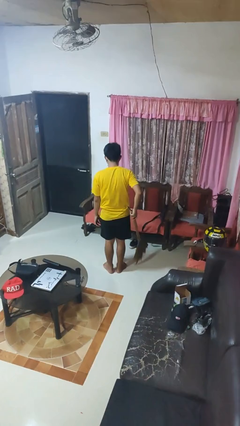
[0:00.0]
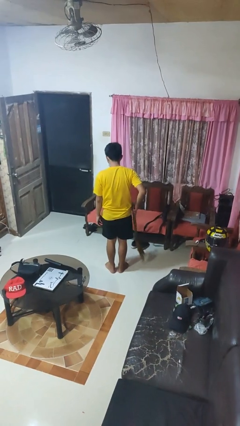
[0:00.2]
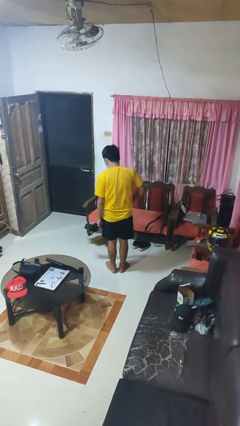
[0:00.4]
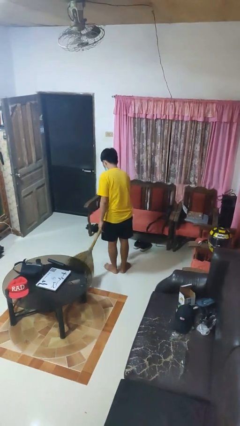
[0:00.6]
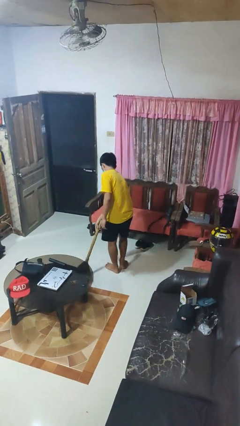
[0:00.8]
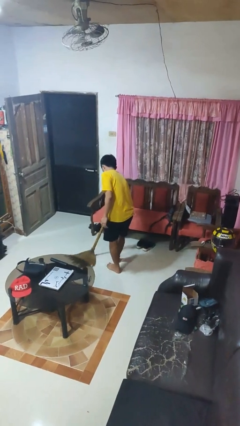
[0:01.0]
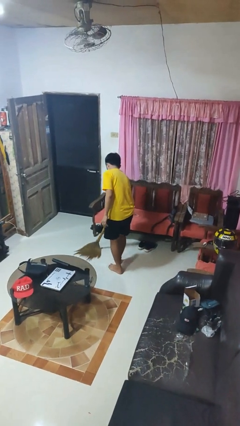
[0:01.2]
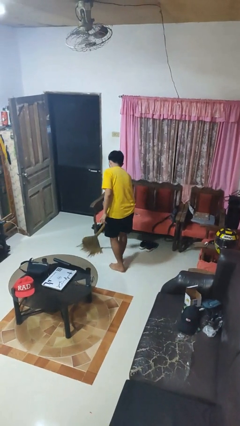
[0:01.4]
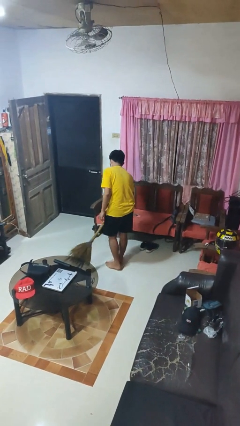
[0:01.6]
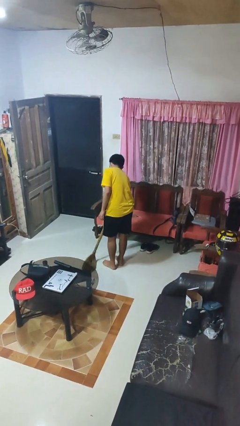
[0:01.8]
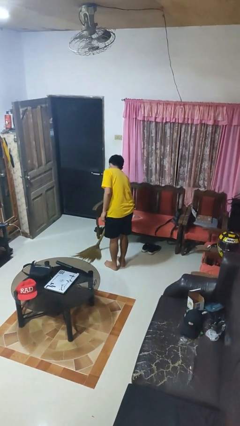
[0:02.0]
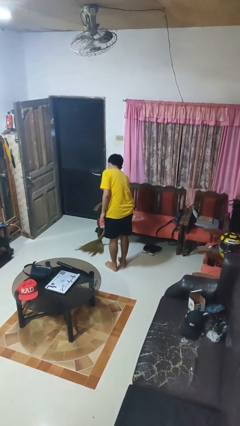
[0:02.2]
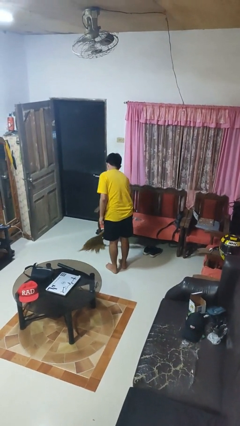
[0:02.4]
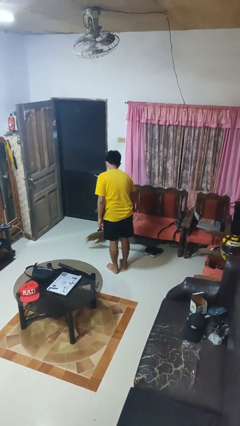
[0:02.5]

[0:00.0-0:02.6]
person sweeps floor

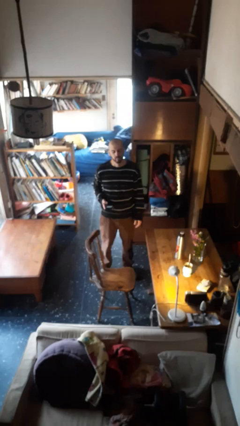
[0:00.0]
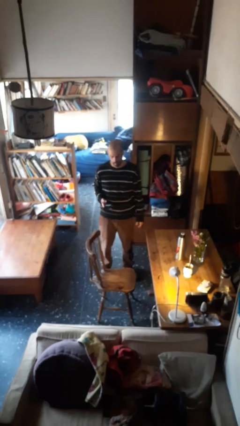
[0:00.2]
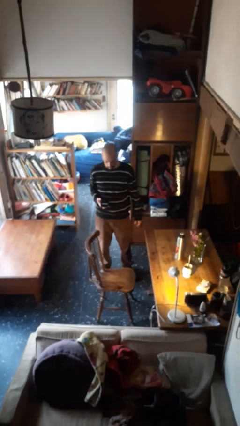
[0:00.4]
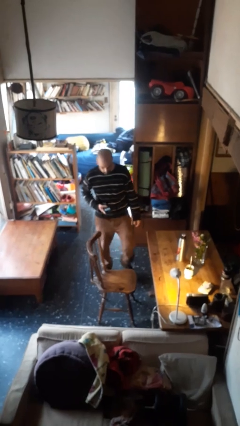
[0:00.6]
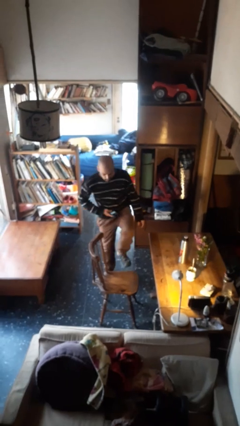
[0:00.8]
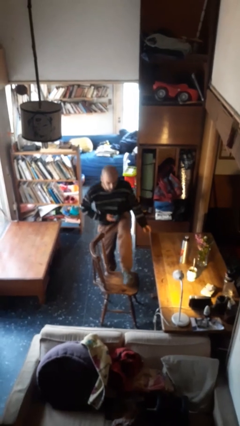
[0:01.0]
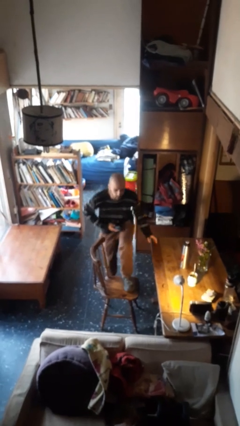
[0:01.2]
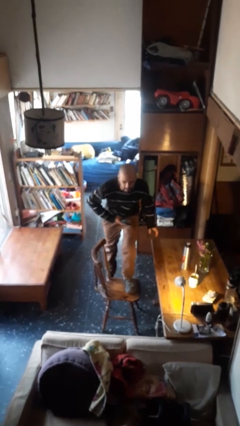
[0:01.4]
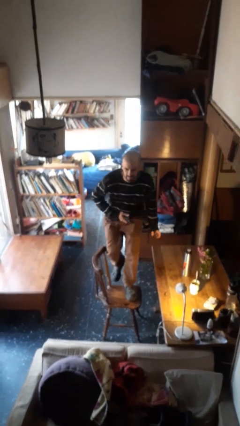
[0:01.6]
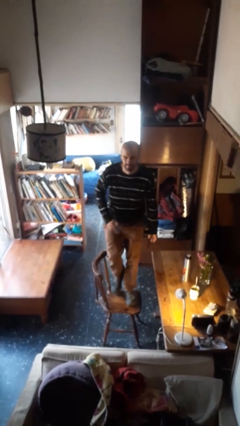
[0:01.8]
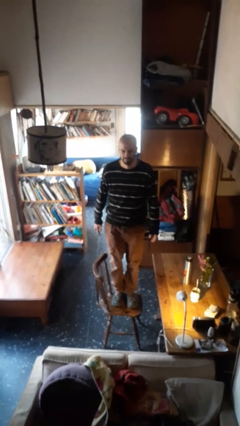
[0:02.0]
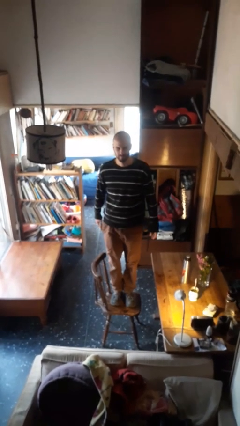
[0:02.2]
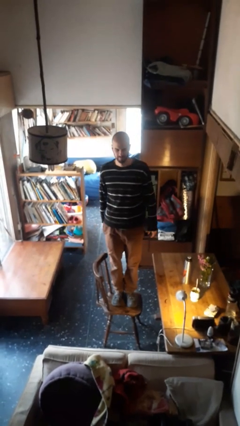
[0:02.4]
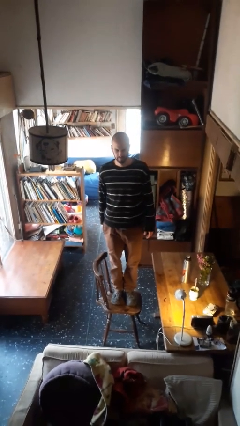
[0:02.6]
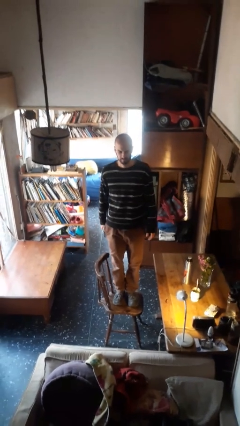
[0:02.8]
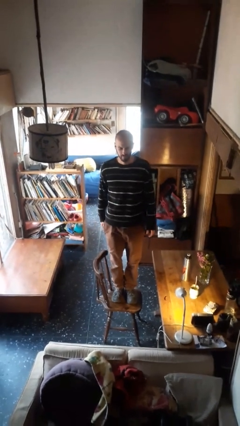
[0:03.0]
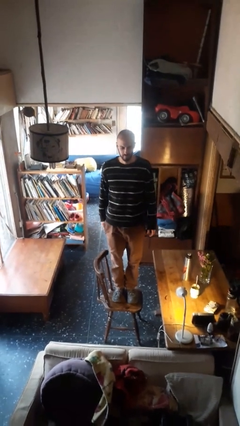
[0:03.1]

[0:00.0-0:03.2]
person climbs on chair

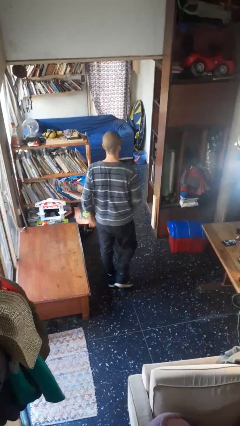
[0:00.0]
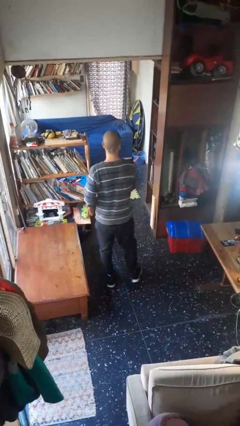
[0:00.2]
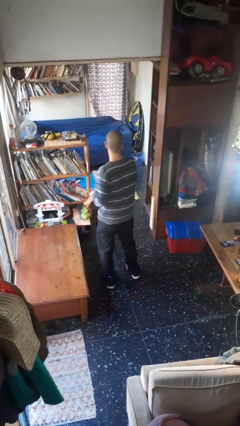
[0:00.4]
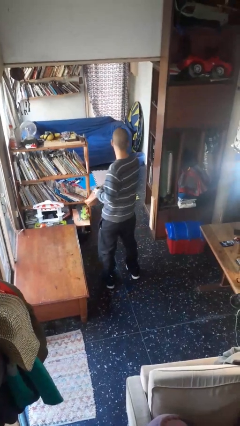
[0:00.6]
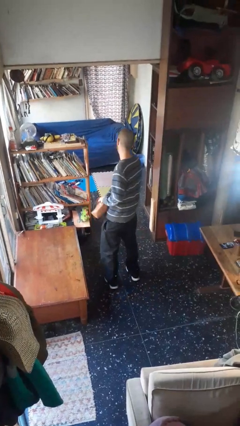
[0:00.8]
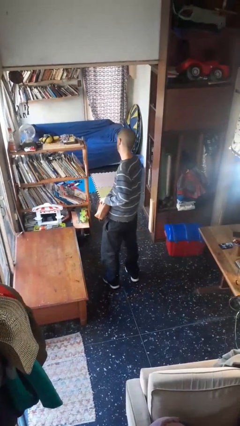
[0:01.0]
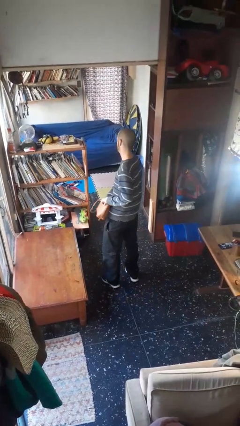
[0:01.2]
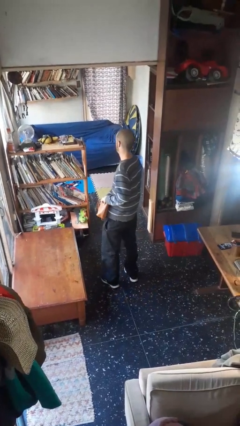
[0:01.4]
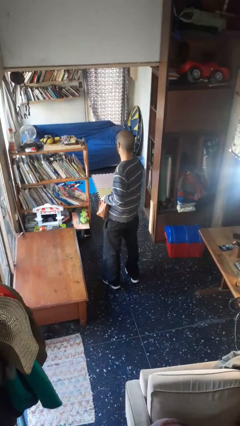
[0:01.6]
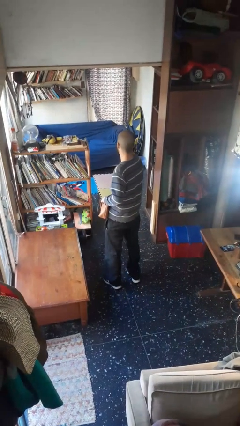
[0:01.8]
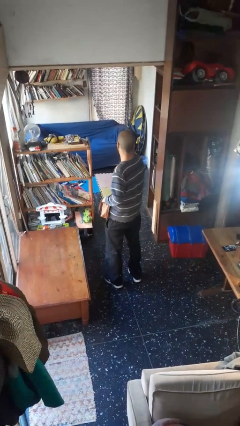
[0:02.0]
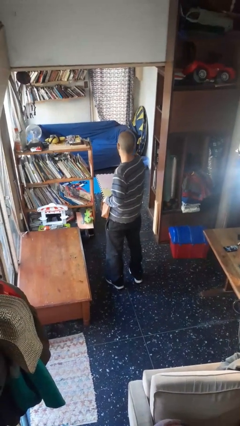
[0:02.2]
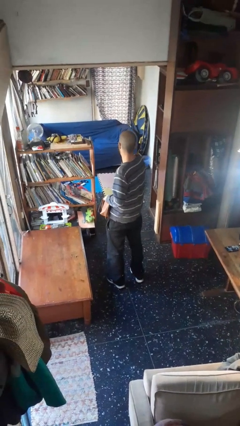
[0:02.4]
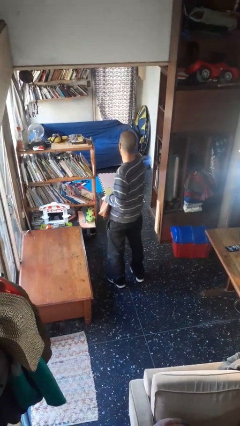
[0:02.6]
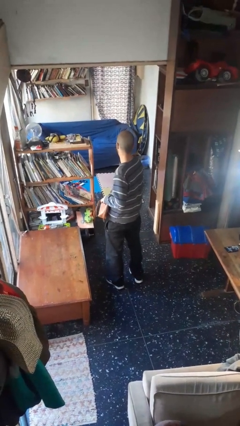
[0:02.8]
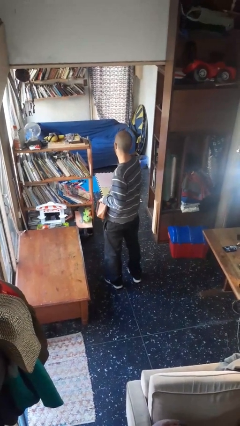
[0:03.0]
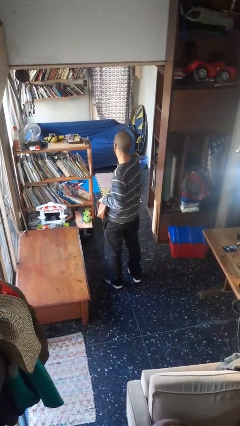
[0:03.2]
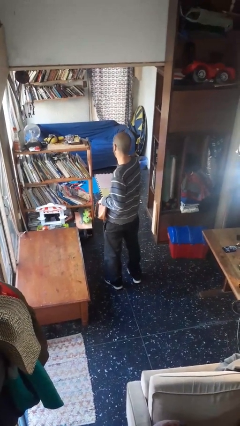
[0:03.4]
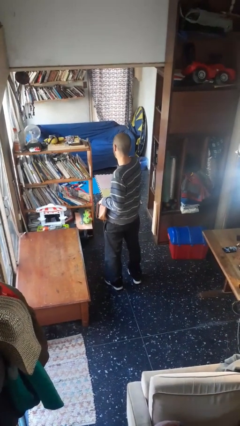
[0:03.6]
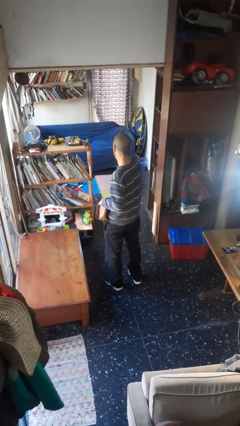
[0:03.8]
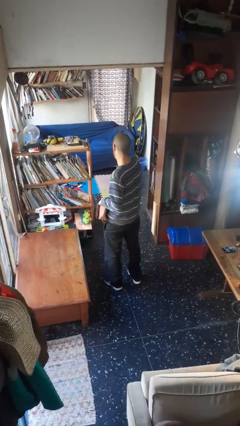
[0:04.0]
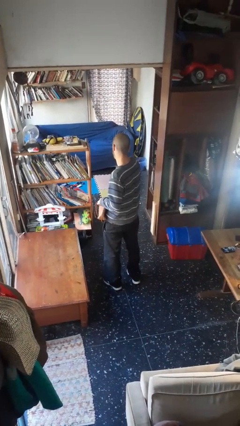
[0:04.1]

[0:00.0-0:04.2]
person searches in purse

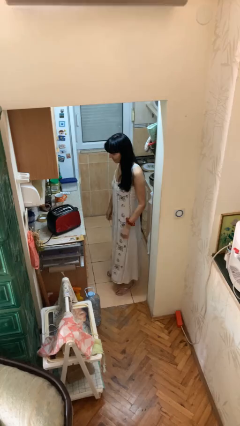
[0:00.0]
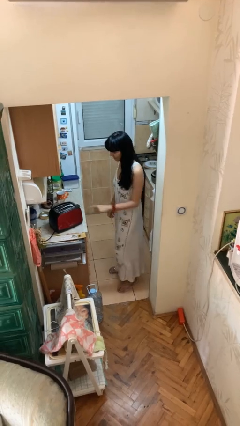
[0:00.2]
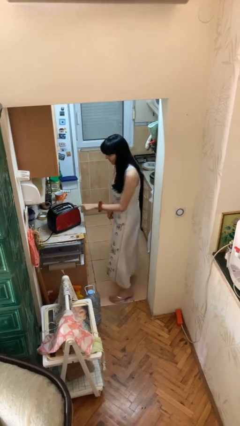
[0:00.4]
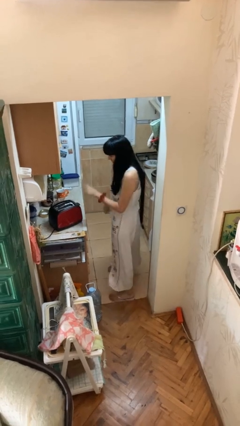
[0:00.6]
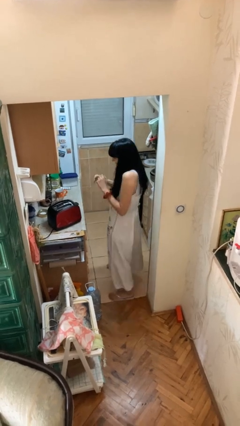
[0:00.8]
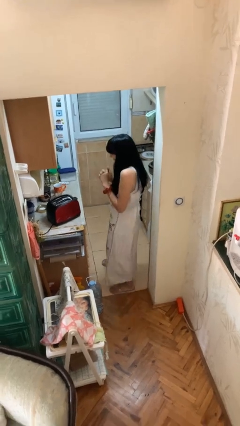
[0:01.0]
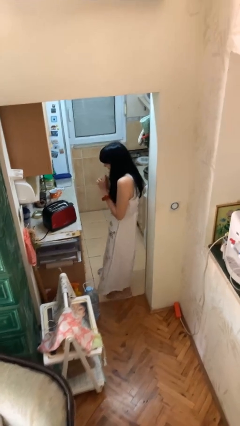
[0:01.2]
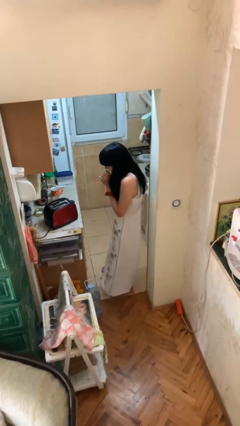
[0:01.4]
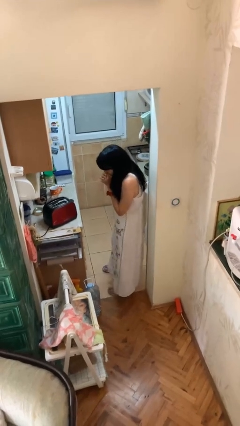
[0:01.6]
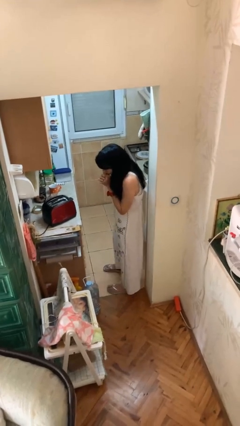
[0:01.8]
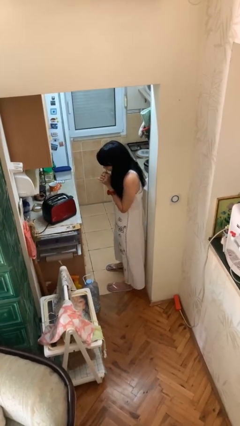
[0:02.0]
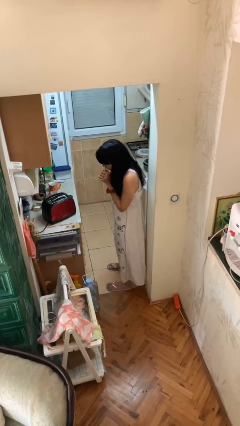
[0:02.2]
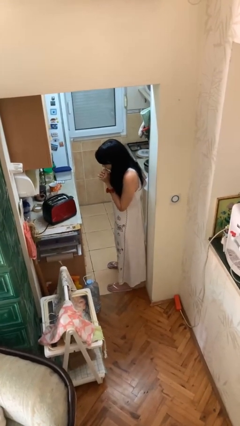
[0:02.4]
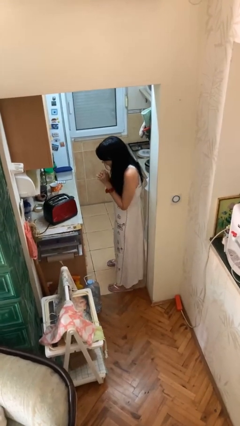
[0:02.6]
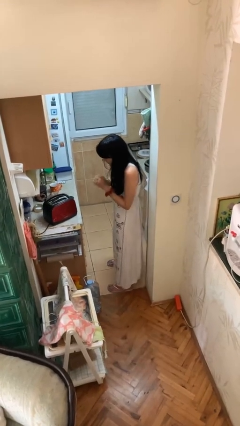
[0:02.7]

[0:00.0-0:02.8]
person burns hand

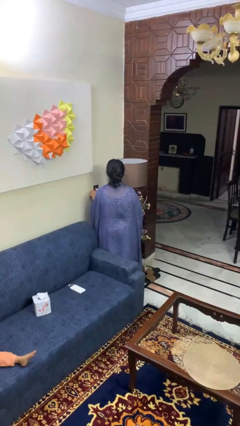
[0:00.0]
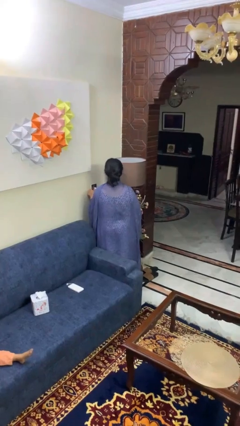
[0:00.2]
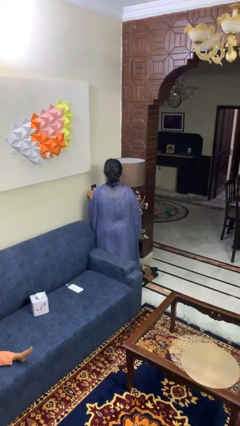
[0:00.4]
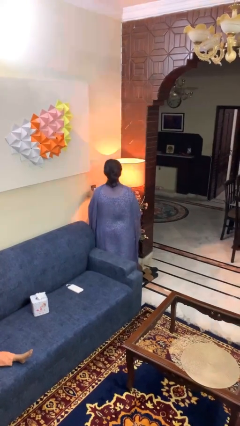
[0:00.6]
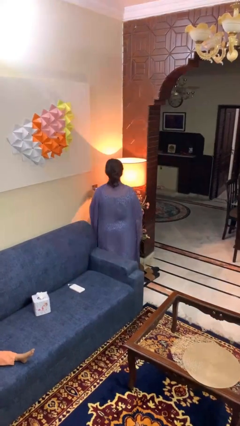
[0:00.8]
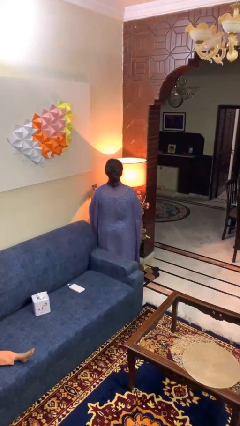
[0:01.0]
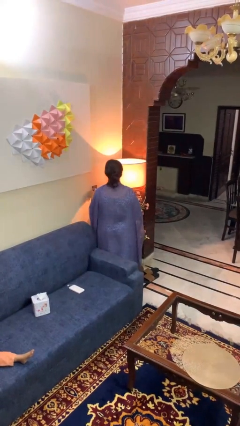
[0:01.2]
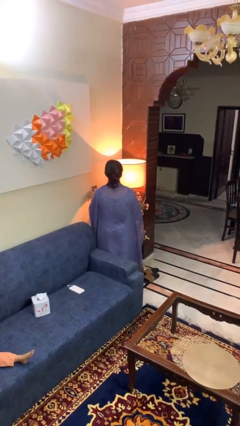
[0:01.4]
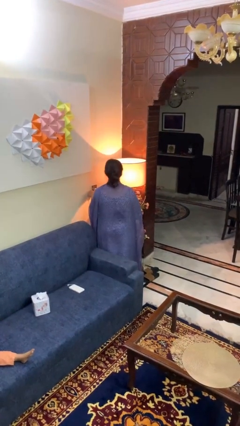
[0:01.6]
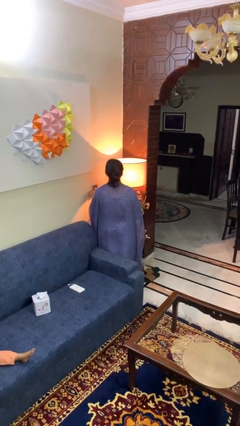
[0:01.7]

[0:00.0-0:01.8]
person turns on lamp

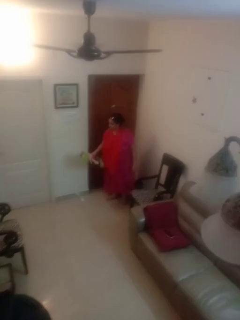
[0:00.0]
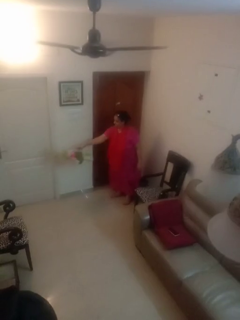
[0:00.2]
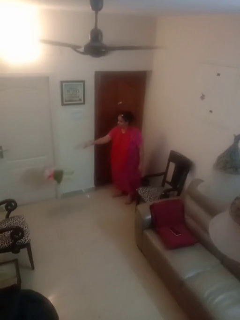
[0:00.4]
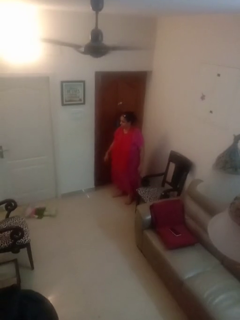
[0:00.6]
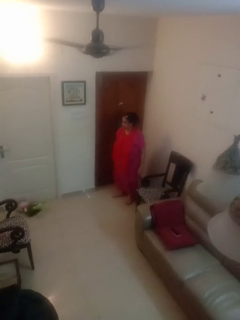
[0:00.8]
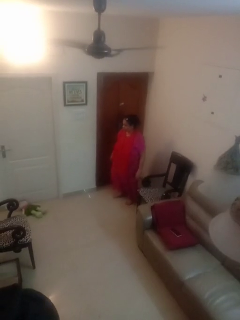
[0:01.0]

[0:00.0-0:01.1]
person throws object to ground

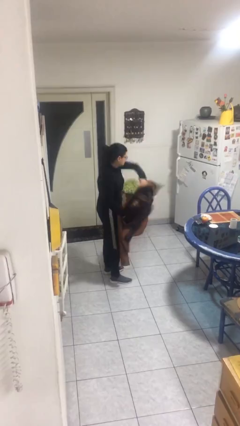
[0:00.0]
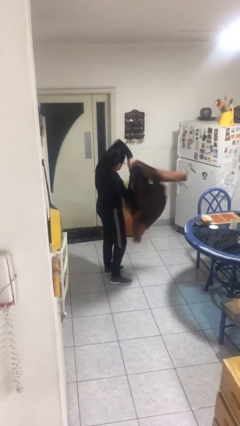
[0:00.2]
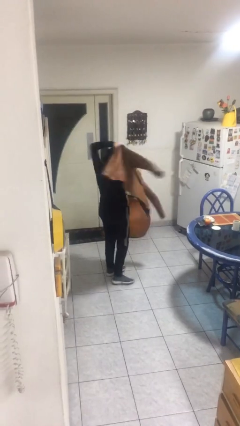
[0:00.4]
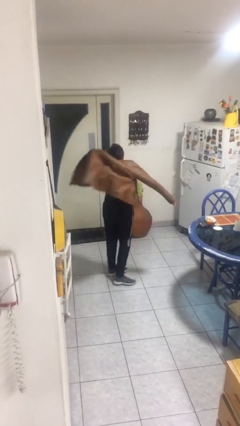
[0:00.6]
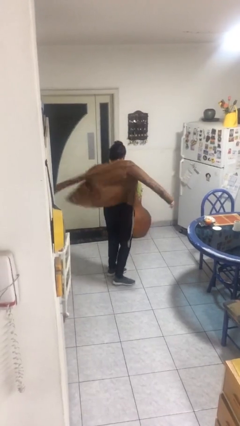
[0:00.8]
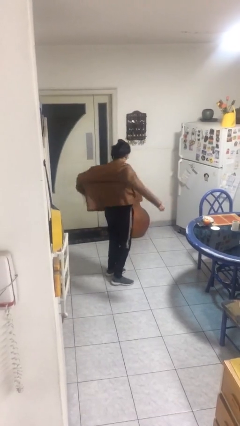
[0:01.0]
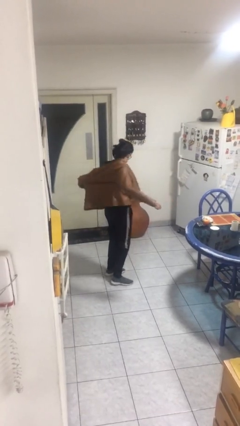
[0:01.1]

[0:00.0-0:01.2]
person puts on jacket

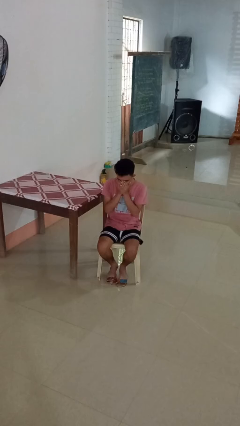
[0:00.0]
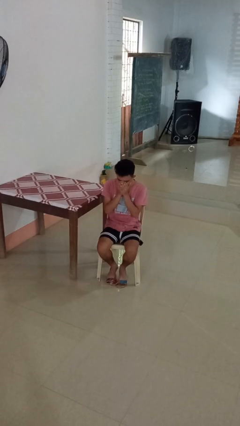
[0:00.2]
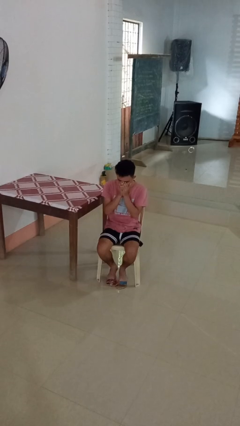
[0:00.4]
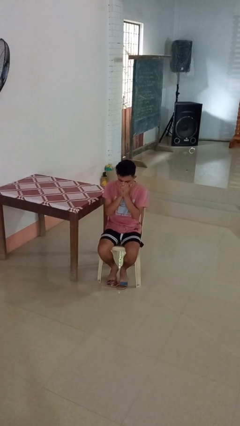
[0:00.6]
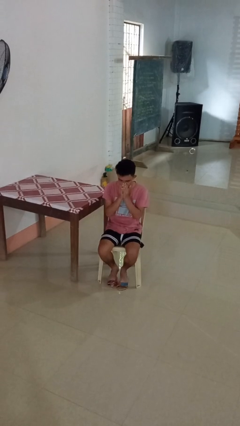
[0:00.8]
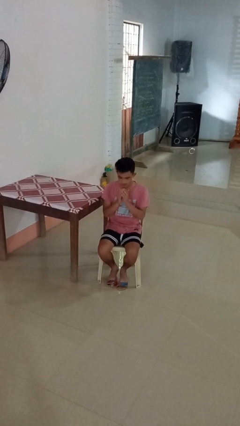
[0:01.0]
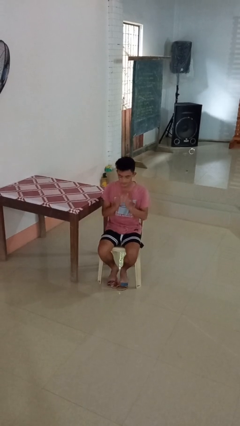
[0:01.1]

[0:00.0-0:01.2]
person sneezes into hand
